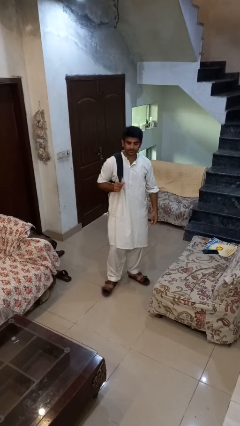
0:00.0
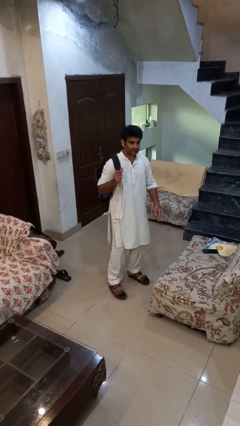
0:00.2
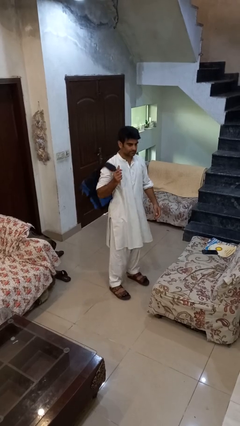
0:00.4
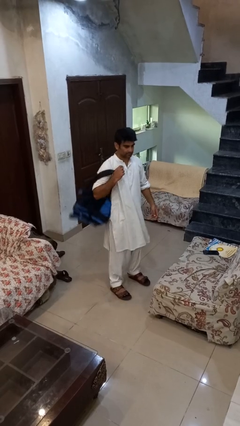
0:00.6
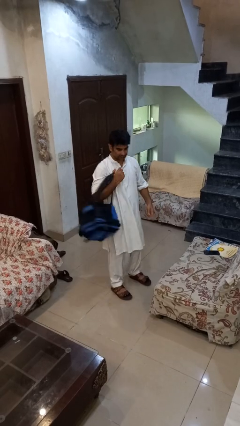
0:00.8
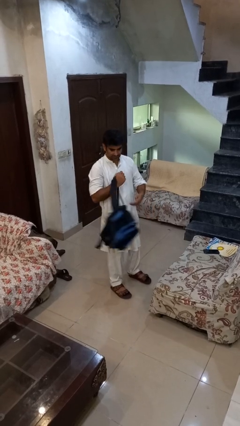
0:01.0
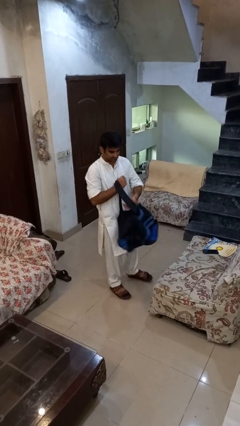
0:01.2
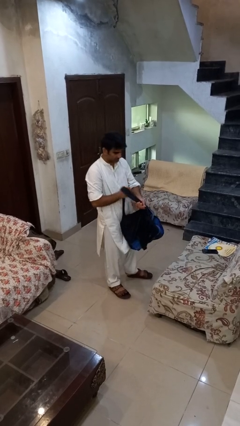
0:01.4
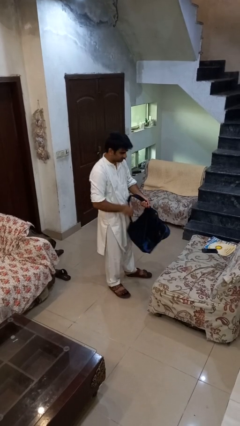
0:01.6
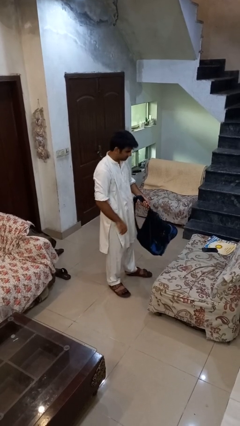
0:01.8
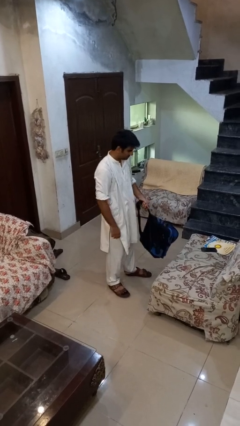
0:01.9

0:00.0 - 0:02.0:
person takes off backpack

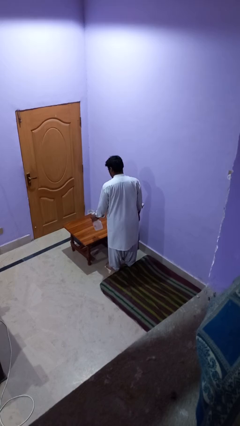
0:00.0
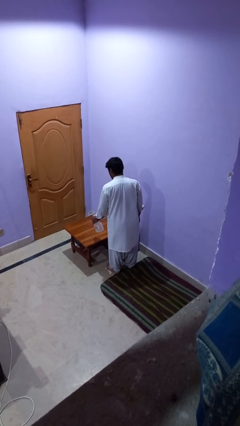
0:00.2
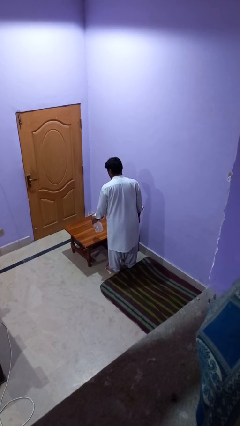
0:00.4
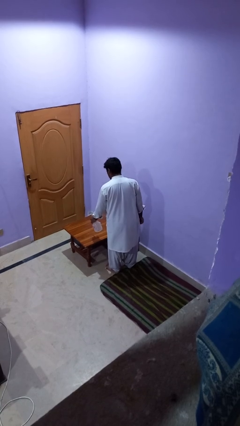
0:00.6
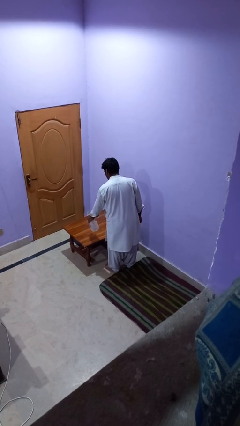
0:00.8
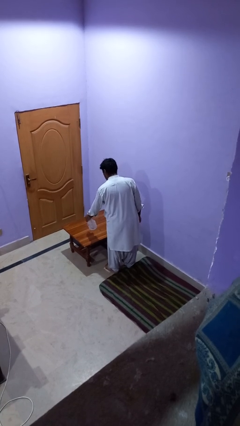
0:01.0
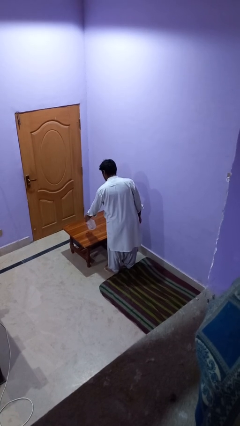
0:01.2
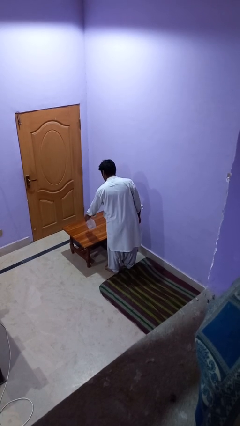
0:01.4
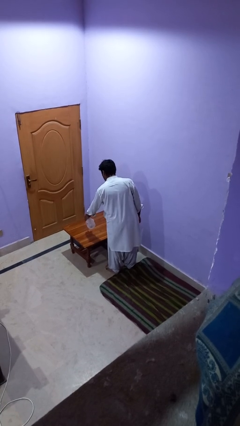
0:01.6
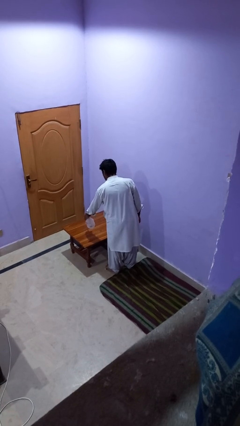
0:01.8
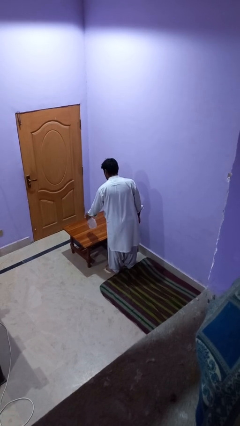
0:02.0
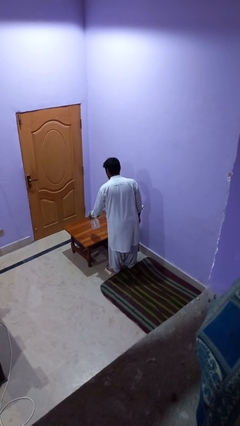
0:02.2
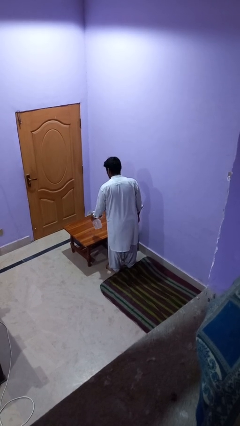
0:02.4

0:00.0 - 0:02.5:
person sprays from bottle

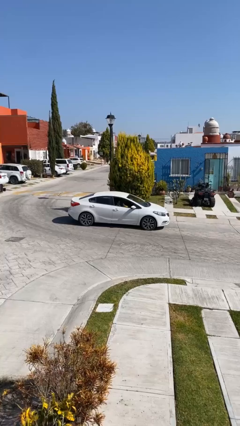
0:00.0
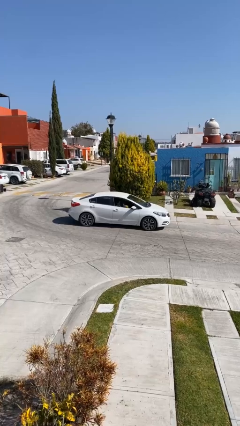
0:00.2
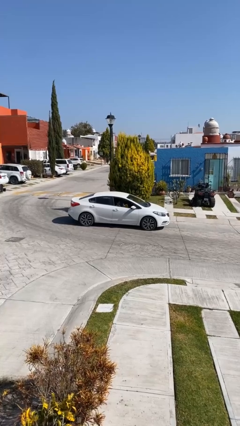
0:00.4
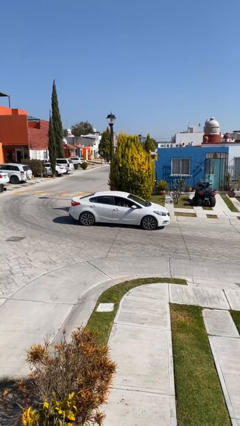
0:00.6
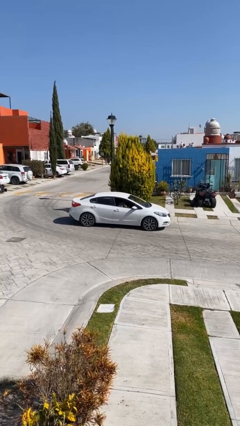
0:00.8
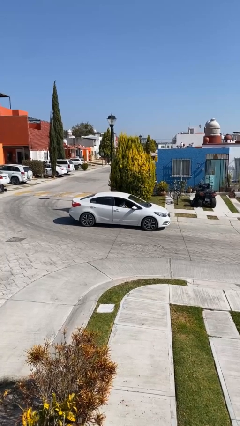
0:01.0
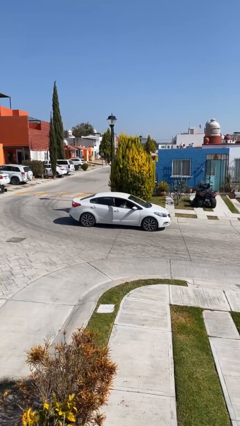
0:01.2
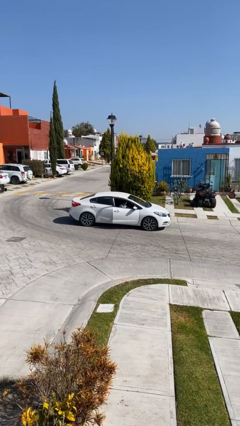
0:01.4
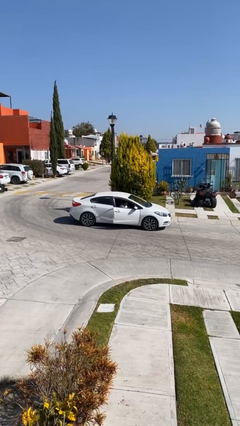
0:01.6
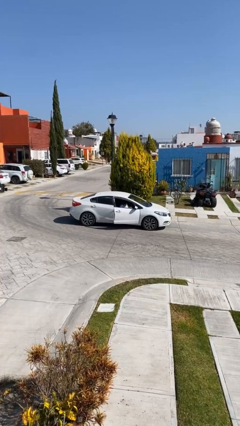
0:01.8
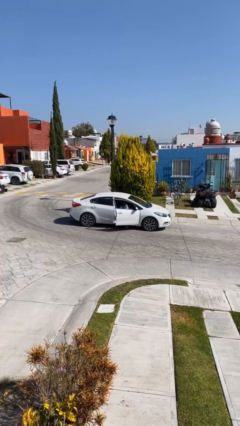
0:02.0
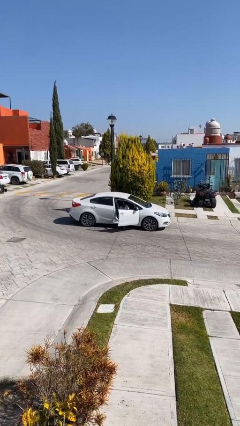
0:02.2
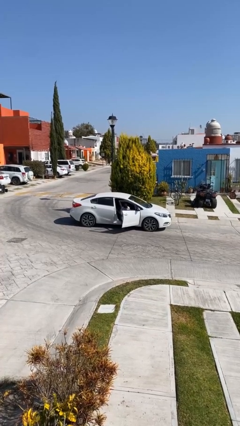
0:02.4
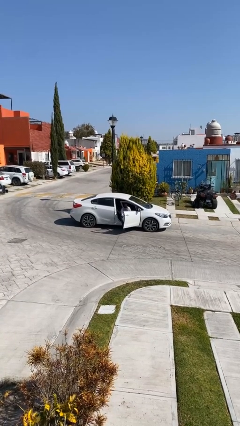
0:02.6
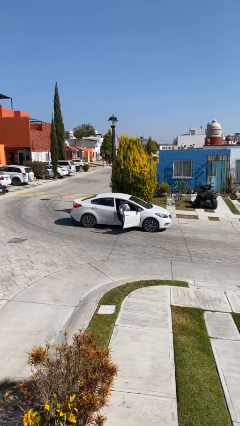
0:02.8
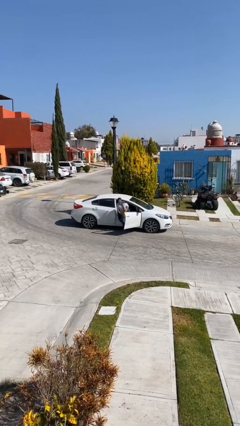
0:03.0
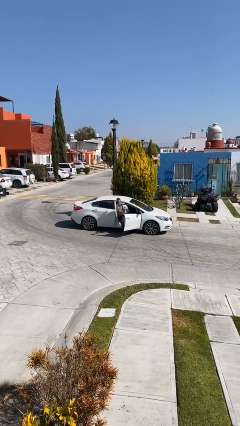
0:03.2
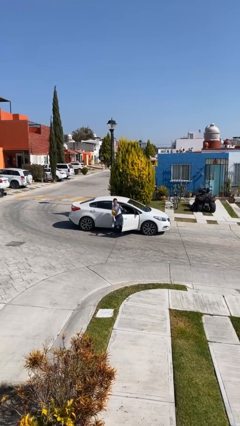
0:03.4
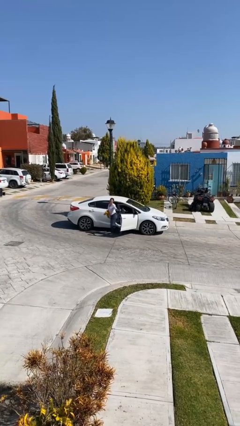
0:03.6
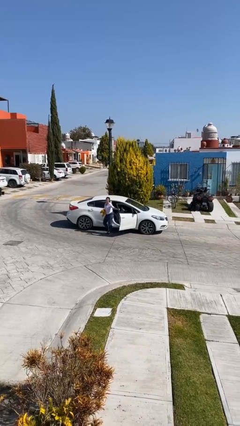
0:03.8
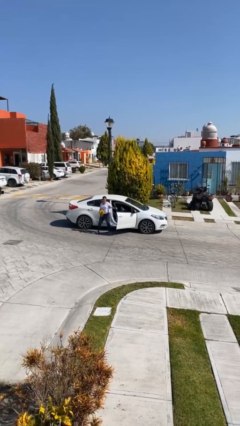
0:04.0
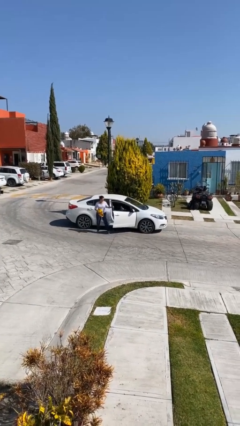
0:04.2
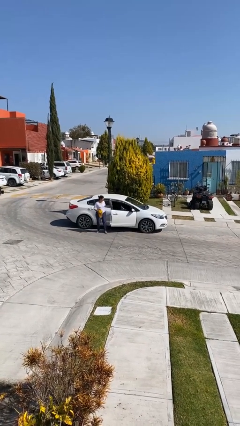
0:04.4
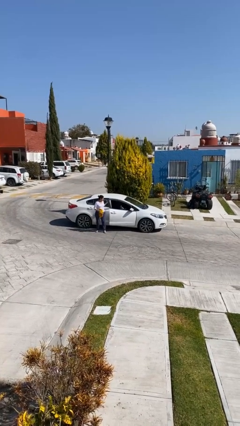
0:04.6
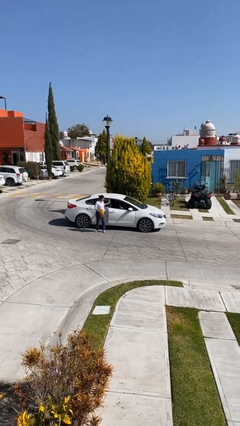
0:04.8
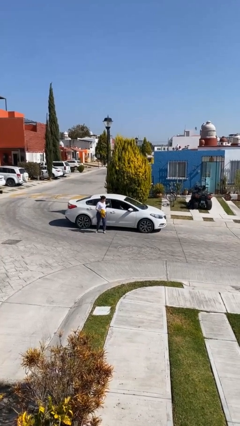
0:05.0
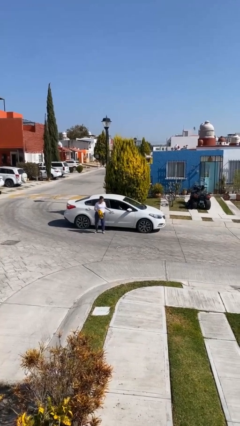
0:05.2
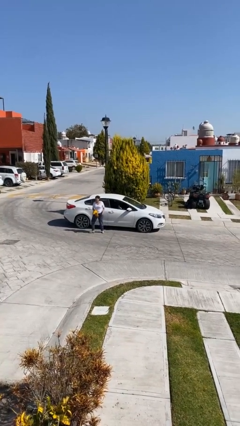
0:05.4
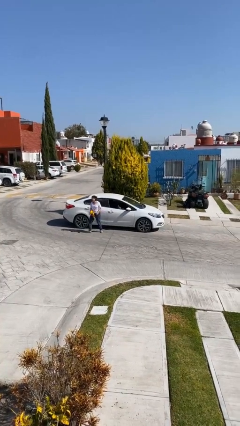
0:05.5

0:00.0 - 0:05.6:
car drops off person

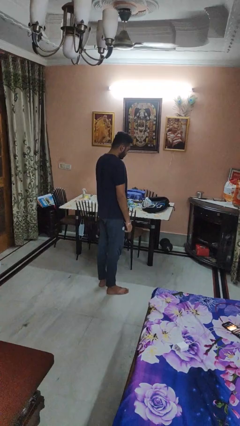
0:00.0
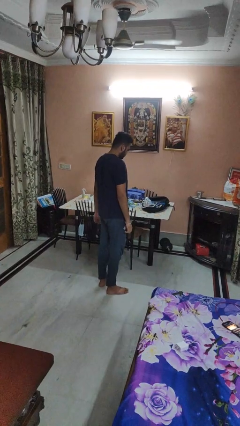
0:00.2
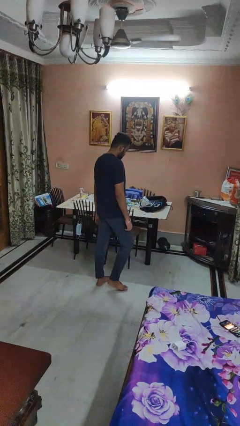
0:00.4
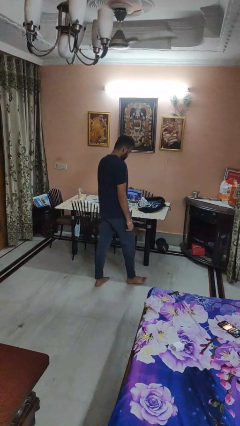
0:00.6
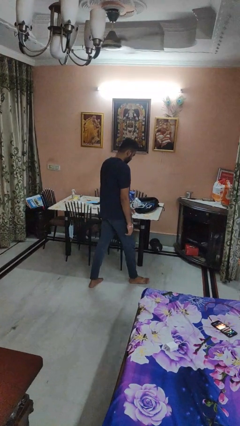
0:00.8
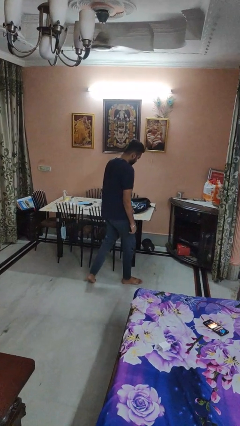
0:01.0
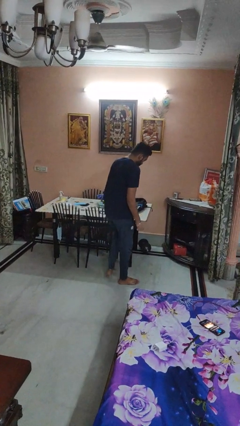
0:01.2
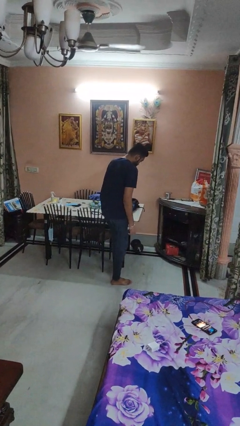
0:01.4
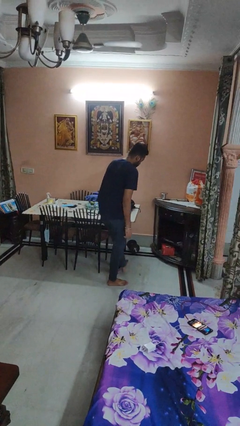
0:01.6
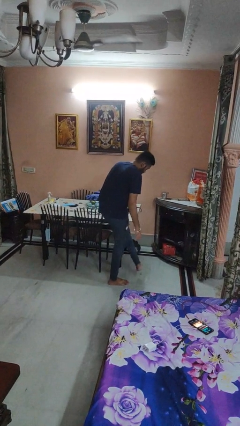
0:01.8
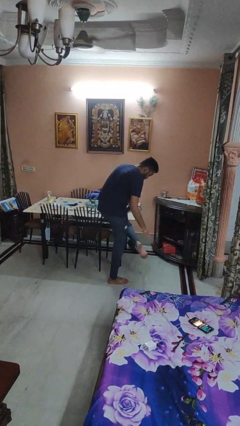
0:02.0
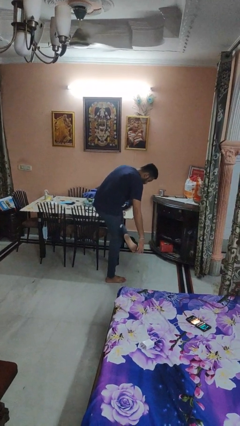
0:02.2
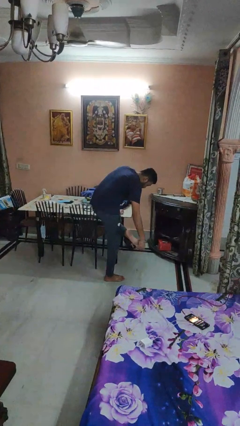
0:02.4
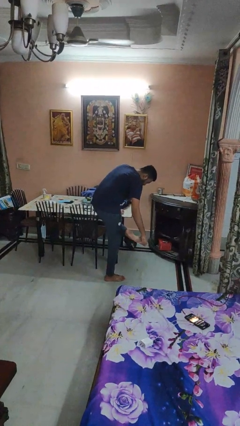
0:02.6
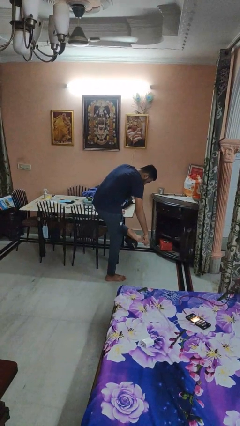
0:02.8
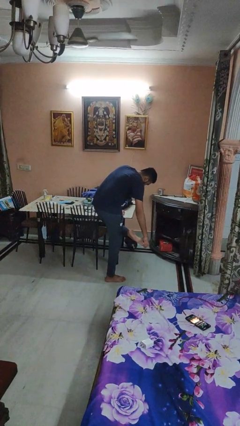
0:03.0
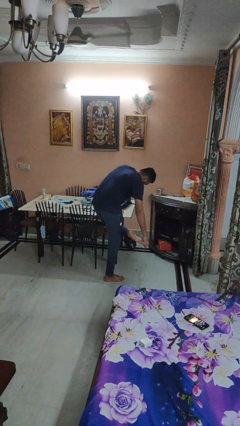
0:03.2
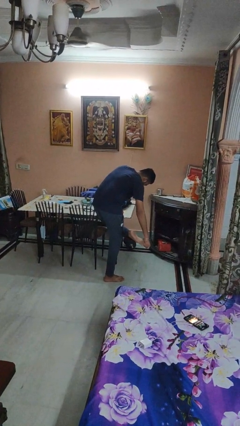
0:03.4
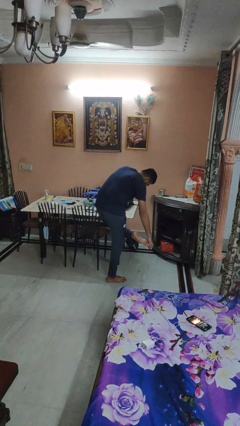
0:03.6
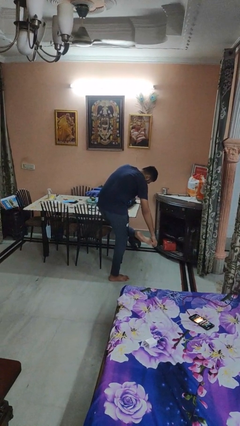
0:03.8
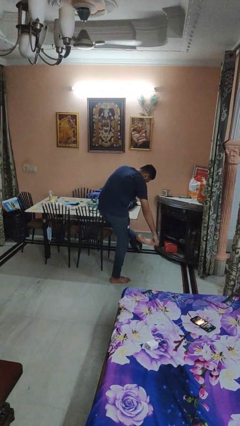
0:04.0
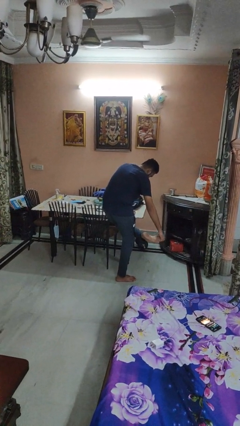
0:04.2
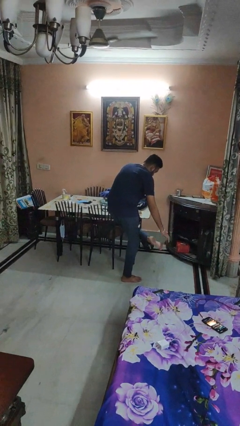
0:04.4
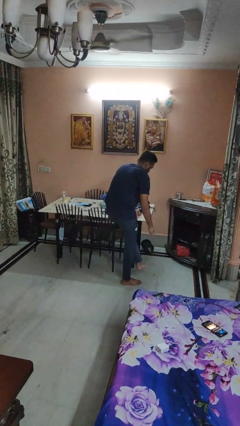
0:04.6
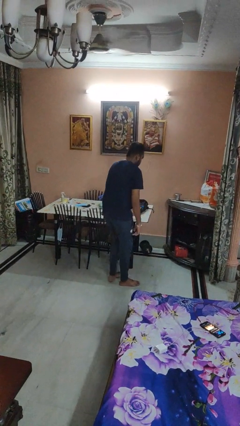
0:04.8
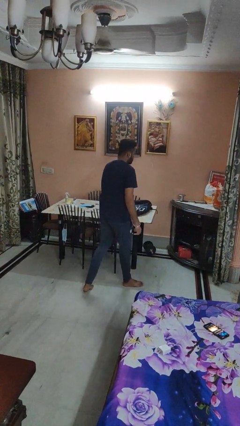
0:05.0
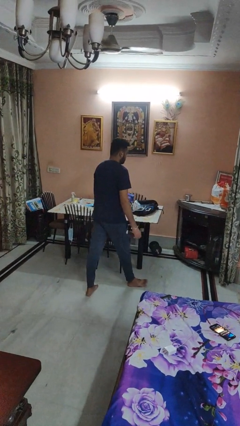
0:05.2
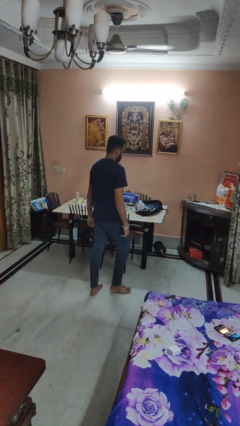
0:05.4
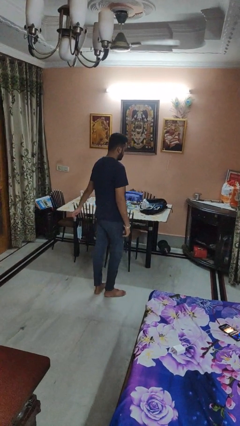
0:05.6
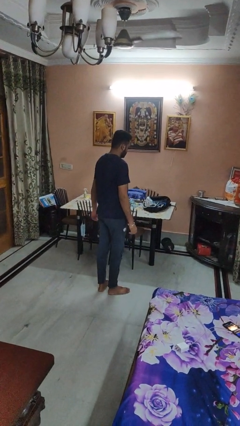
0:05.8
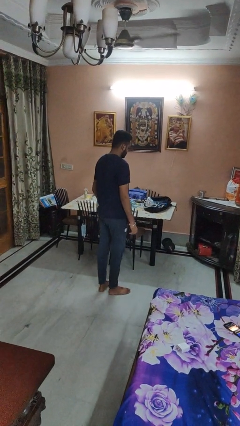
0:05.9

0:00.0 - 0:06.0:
person bumps into table

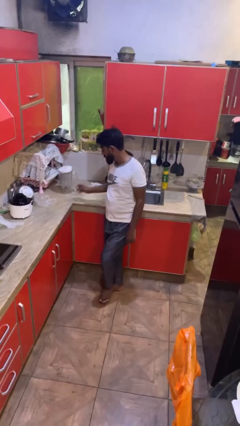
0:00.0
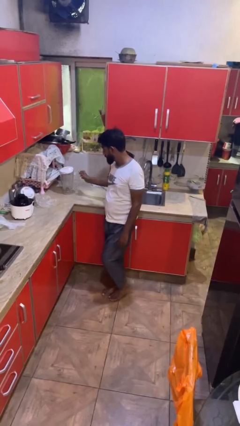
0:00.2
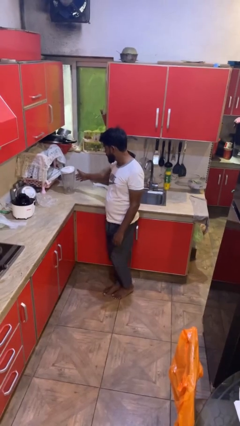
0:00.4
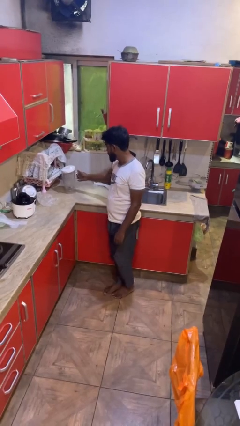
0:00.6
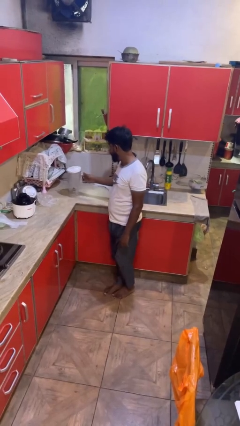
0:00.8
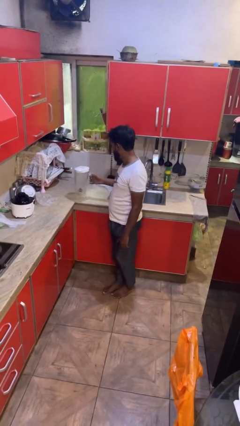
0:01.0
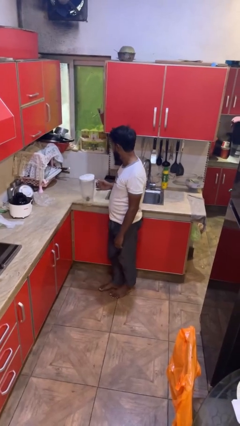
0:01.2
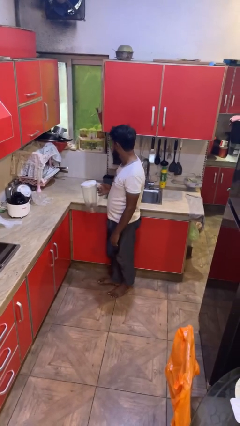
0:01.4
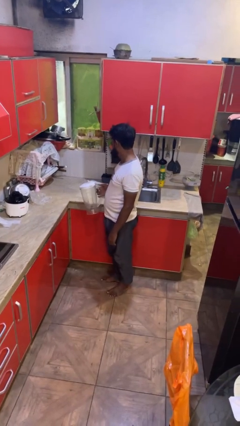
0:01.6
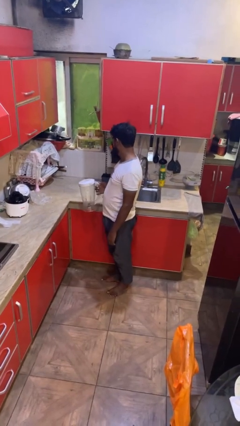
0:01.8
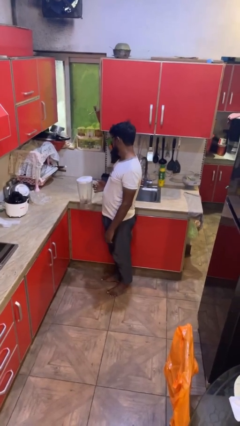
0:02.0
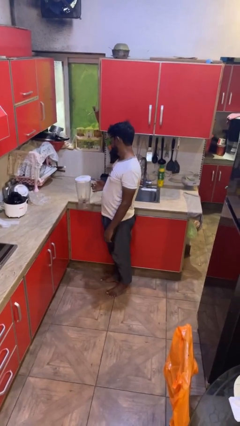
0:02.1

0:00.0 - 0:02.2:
person picks up object from countertop
